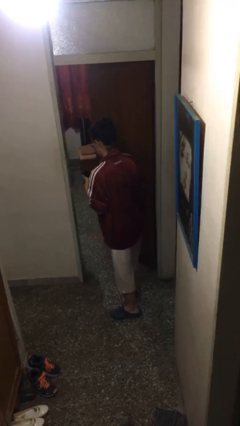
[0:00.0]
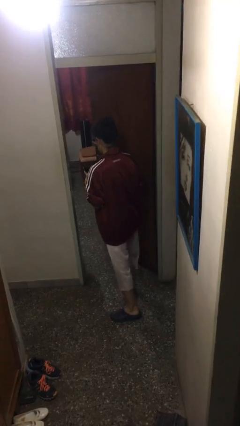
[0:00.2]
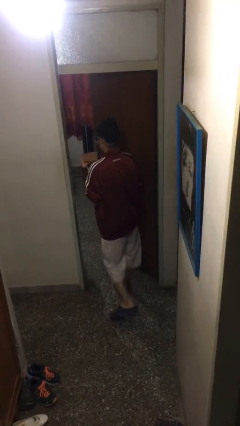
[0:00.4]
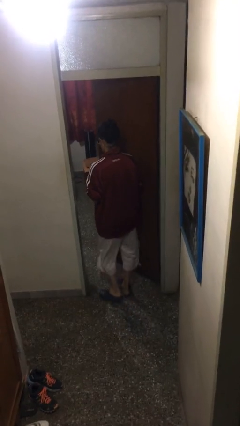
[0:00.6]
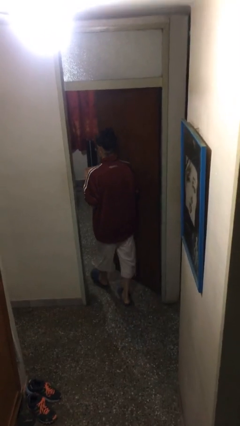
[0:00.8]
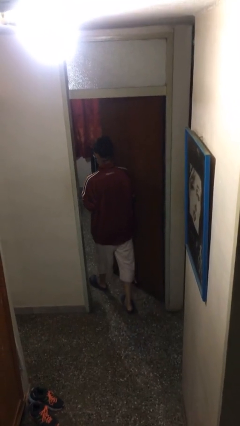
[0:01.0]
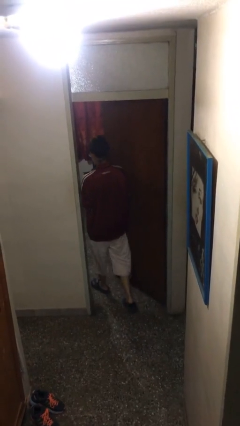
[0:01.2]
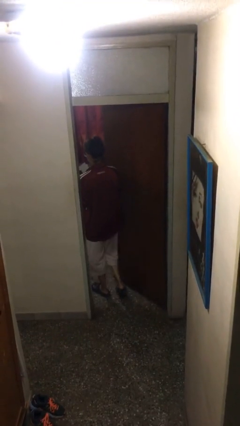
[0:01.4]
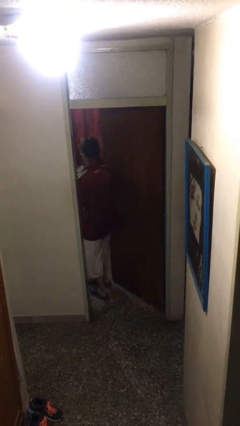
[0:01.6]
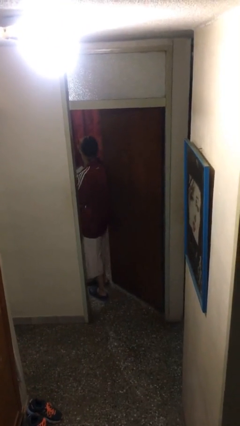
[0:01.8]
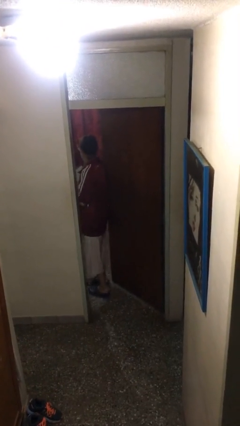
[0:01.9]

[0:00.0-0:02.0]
person exits scene through structure

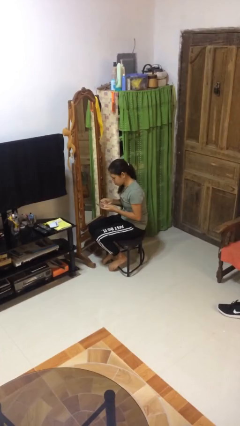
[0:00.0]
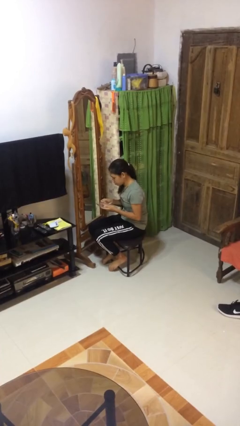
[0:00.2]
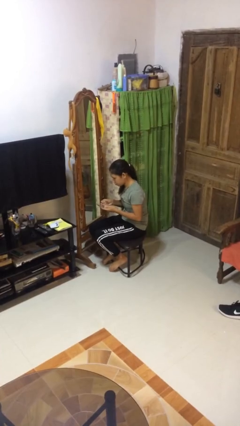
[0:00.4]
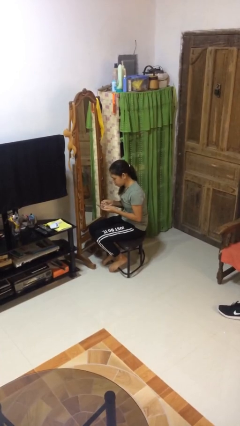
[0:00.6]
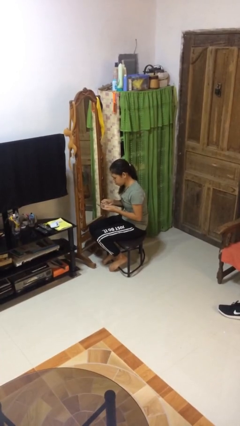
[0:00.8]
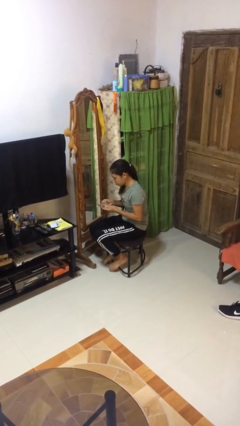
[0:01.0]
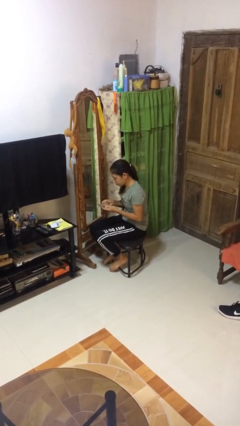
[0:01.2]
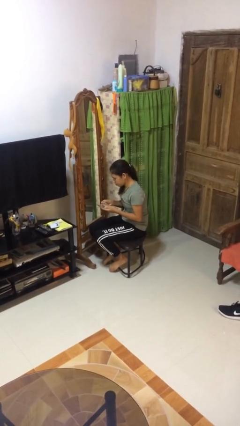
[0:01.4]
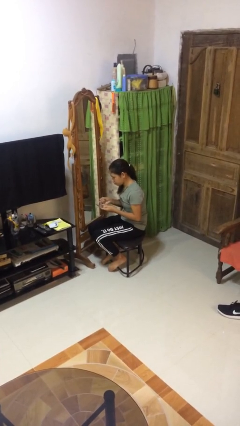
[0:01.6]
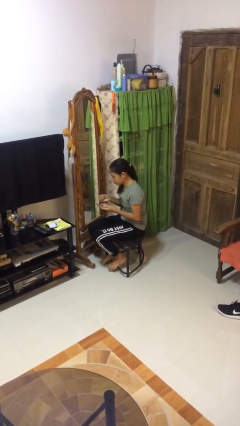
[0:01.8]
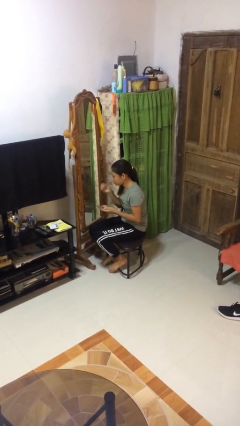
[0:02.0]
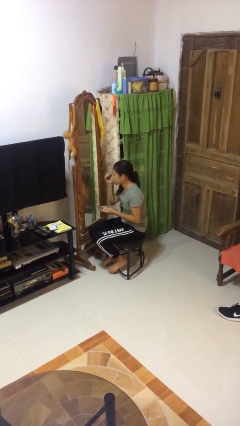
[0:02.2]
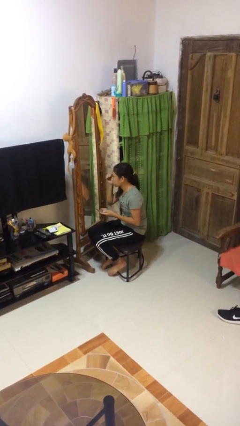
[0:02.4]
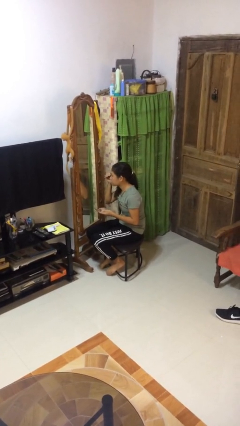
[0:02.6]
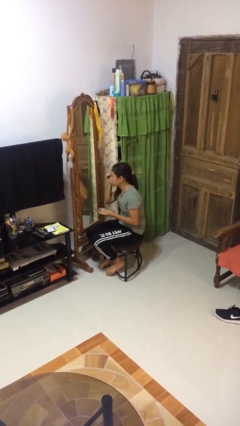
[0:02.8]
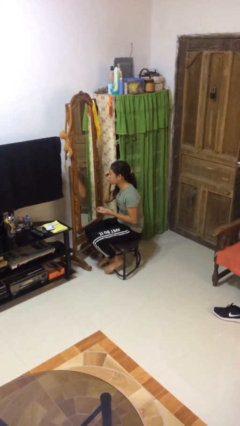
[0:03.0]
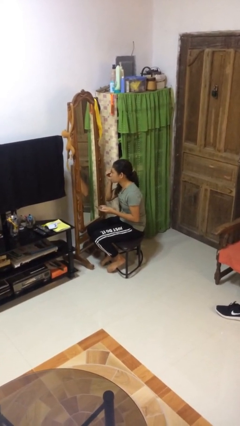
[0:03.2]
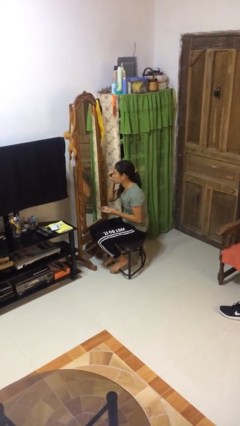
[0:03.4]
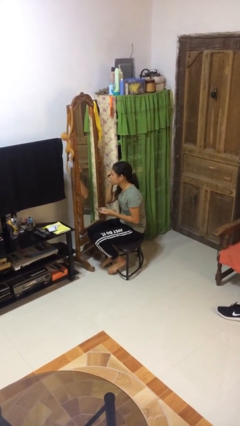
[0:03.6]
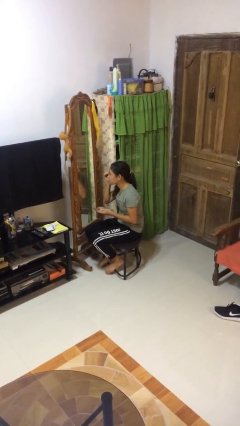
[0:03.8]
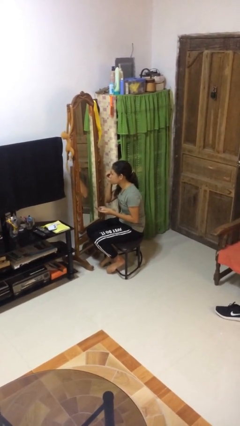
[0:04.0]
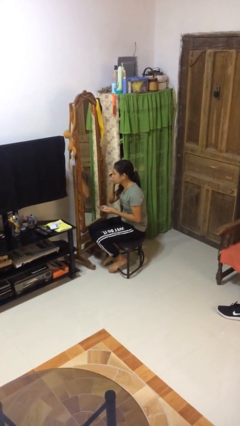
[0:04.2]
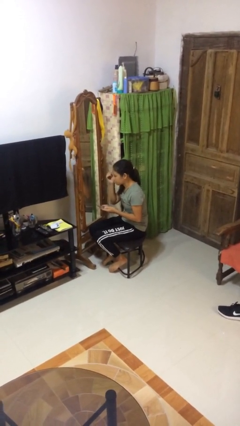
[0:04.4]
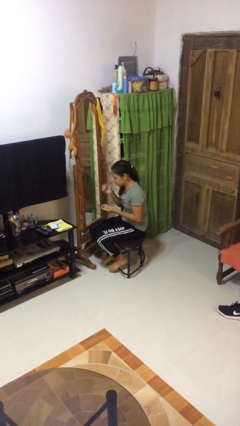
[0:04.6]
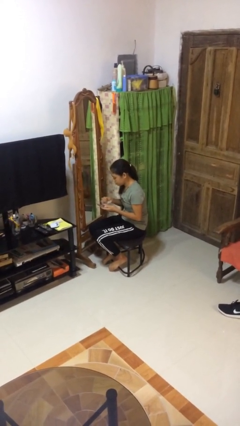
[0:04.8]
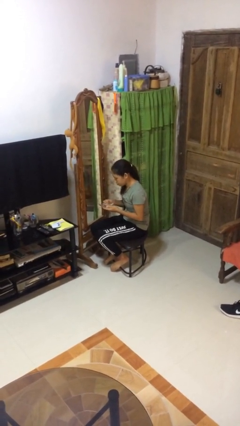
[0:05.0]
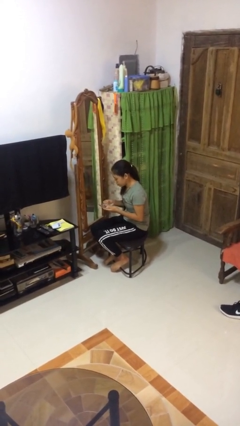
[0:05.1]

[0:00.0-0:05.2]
person applies eye makeup

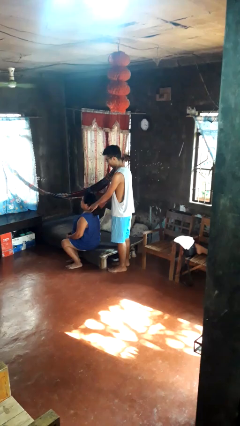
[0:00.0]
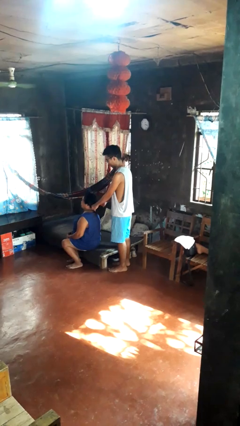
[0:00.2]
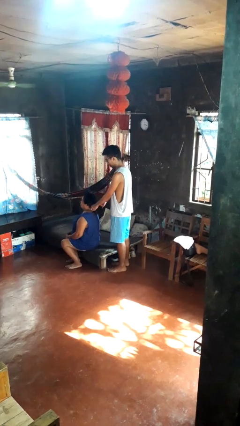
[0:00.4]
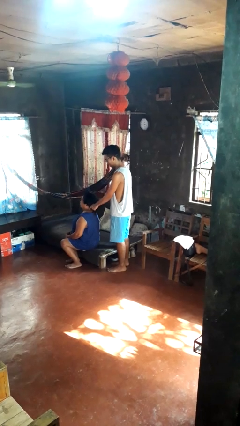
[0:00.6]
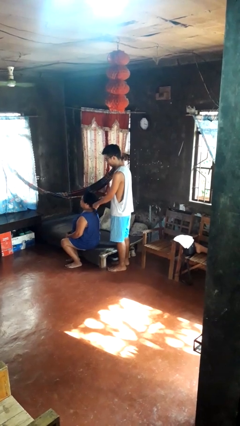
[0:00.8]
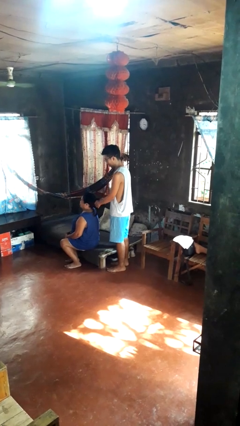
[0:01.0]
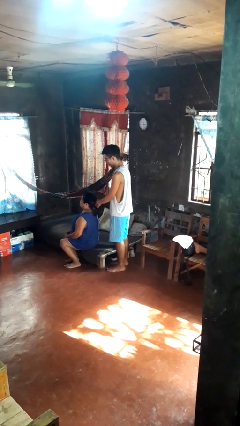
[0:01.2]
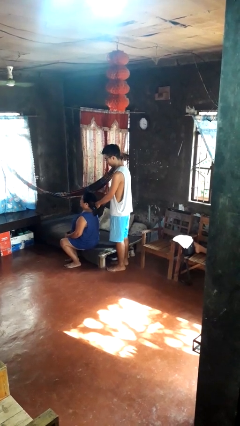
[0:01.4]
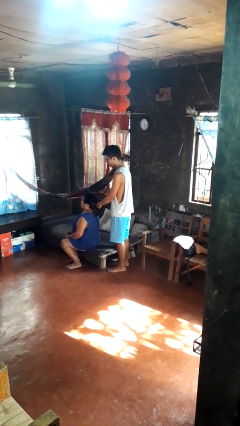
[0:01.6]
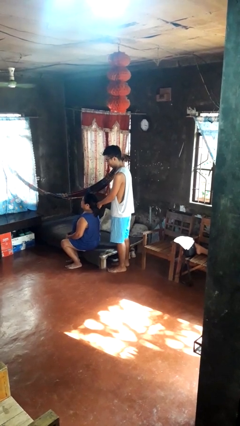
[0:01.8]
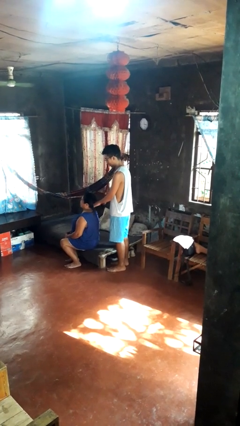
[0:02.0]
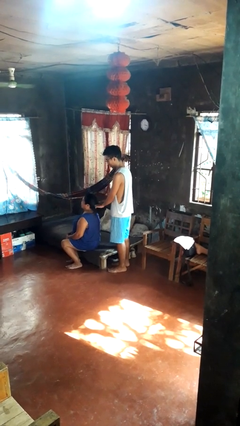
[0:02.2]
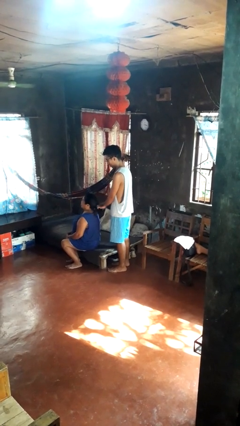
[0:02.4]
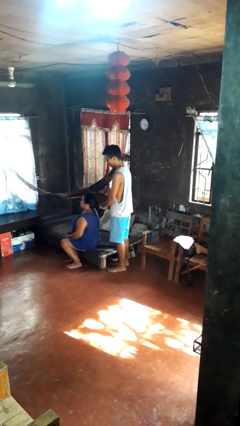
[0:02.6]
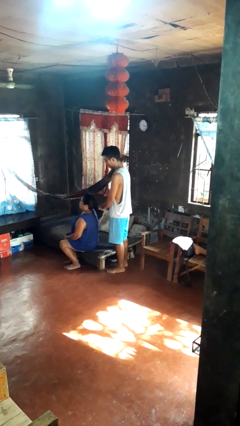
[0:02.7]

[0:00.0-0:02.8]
person braids hair of person

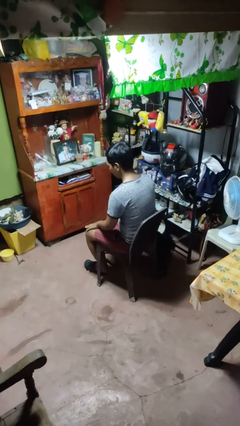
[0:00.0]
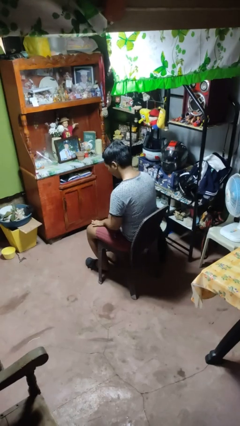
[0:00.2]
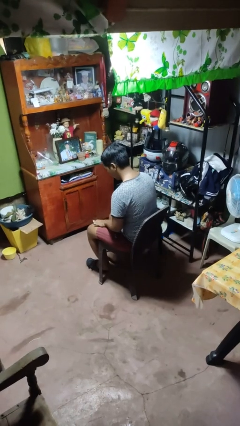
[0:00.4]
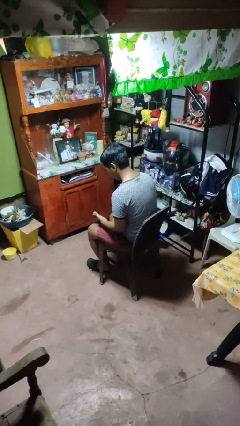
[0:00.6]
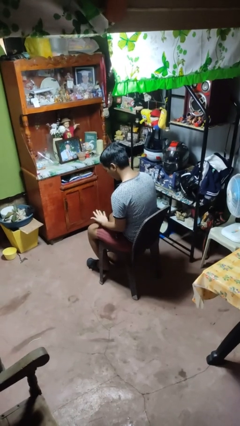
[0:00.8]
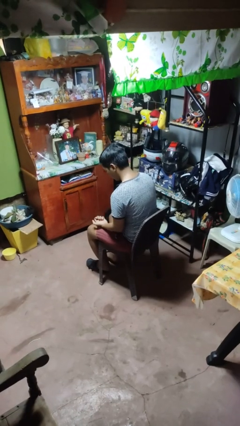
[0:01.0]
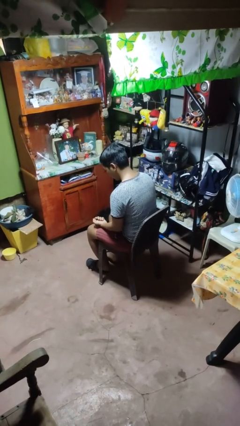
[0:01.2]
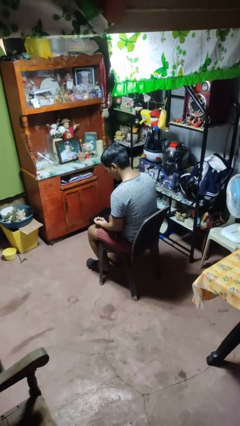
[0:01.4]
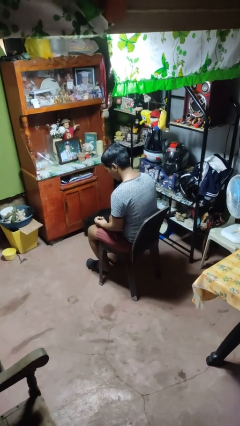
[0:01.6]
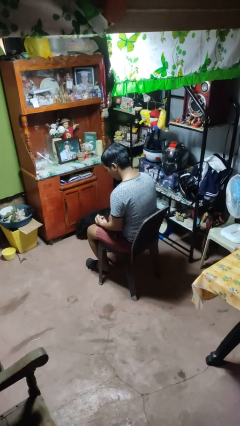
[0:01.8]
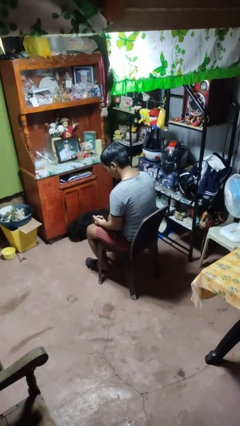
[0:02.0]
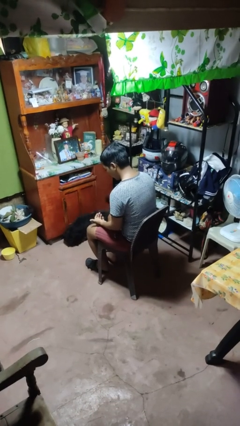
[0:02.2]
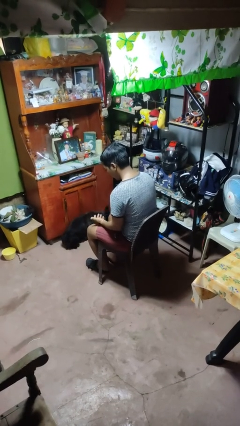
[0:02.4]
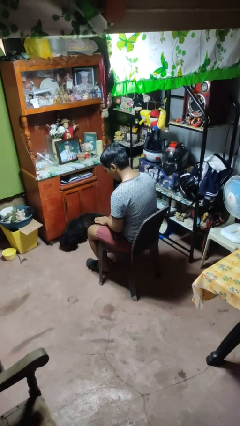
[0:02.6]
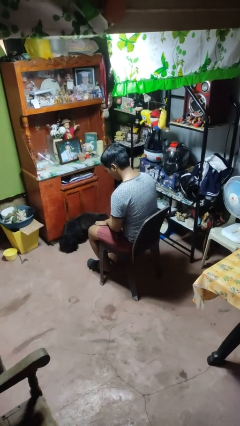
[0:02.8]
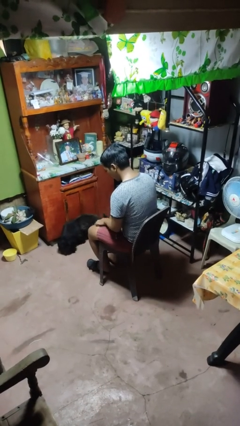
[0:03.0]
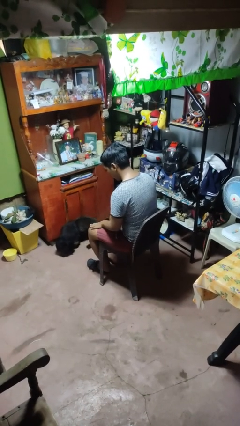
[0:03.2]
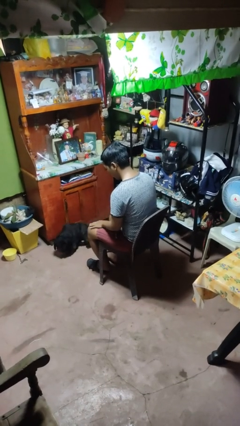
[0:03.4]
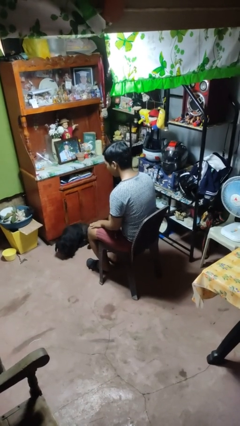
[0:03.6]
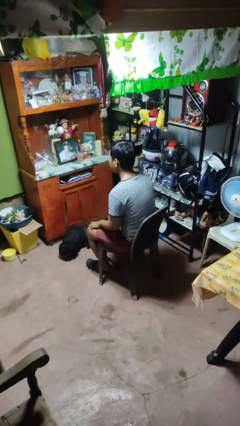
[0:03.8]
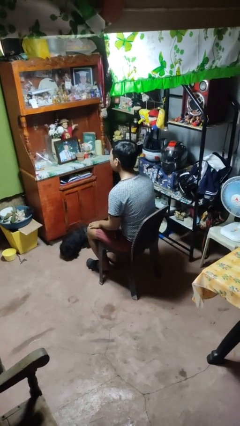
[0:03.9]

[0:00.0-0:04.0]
person looks at hands in lap

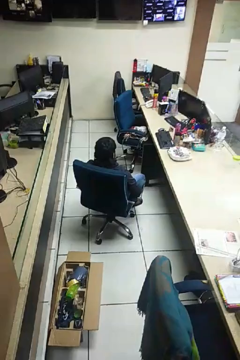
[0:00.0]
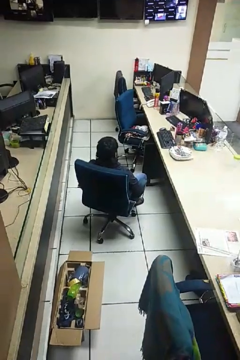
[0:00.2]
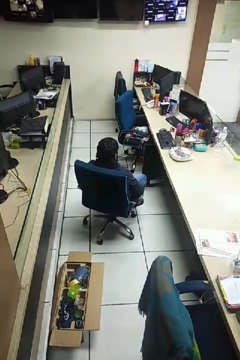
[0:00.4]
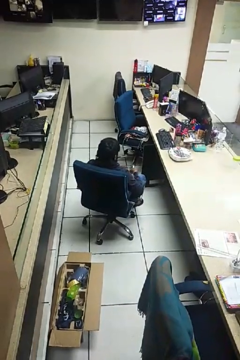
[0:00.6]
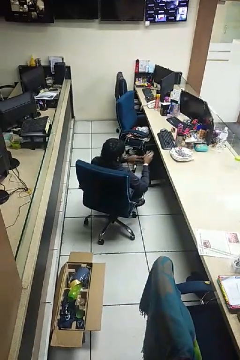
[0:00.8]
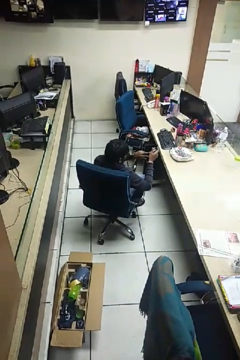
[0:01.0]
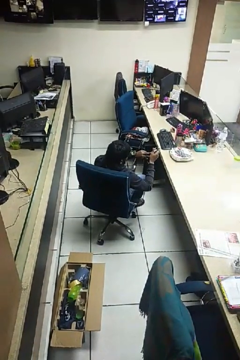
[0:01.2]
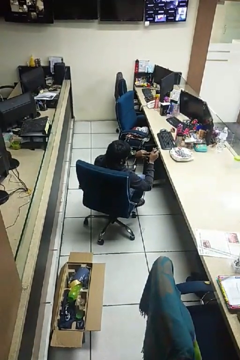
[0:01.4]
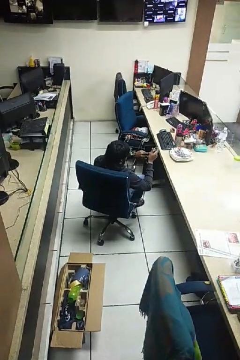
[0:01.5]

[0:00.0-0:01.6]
person clips fingernails

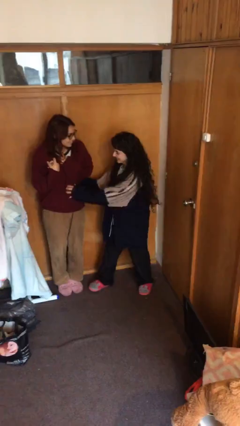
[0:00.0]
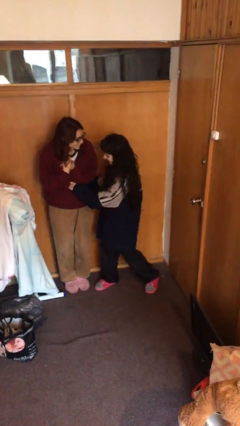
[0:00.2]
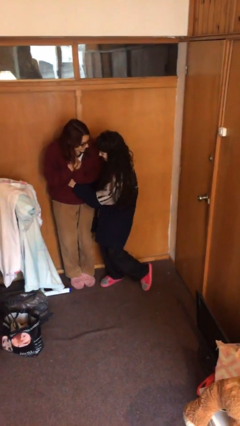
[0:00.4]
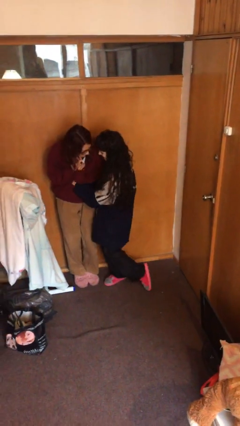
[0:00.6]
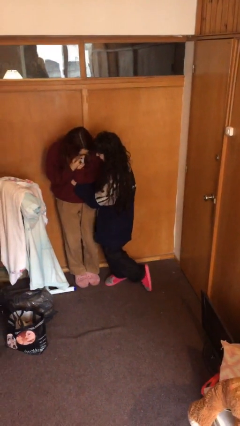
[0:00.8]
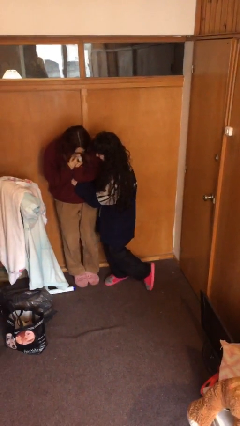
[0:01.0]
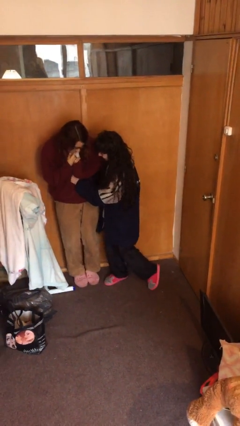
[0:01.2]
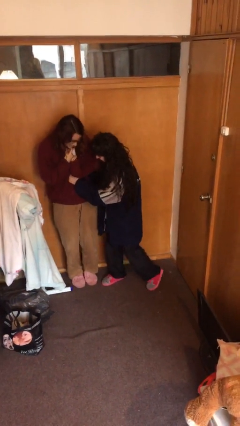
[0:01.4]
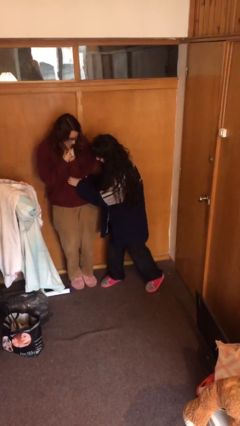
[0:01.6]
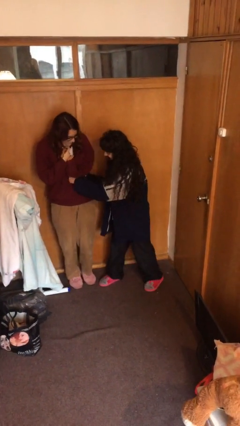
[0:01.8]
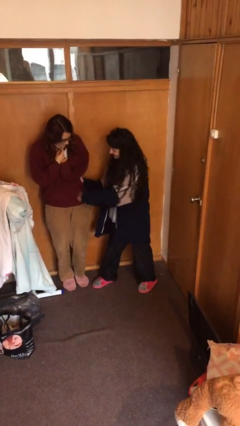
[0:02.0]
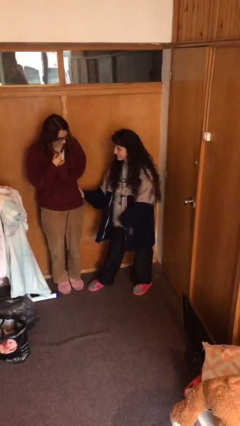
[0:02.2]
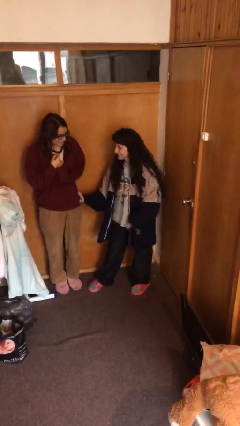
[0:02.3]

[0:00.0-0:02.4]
person tickles person
